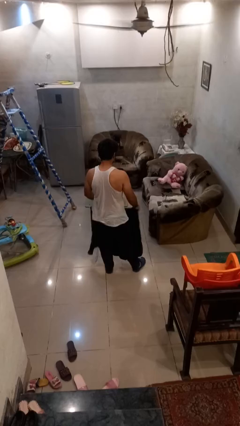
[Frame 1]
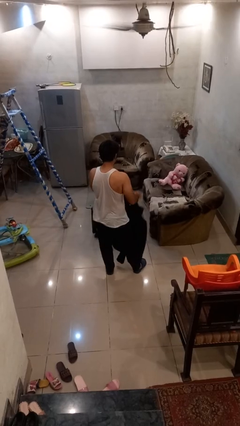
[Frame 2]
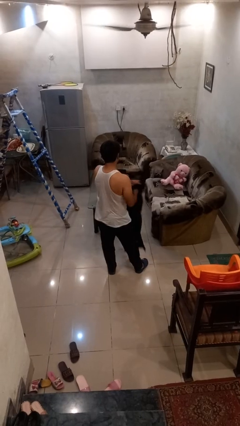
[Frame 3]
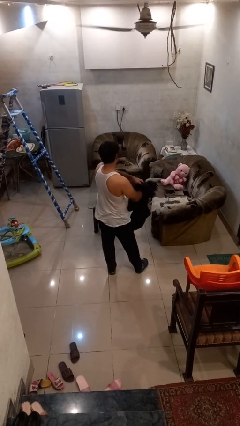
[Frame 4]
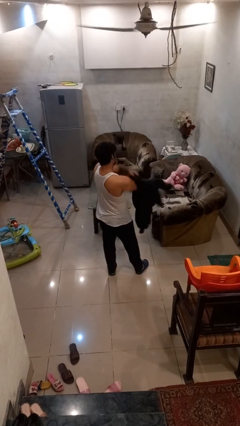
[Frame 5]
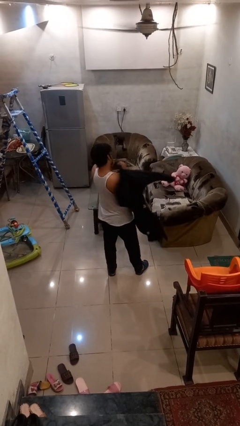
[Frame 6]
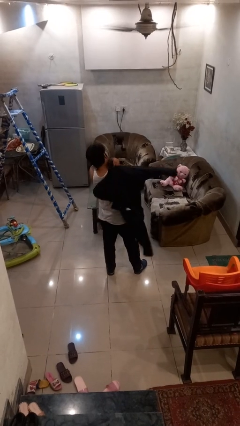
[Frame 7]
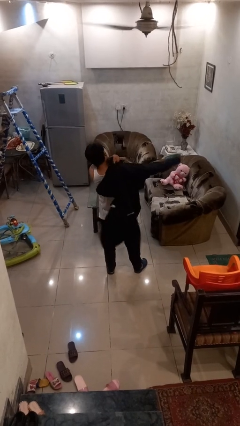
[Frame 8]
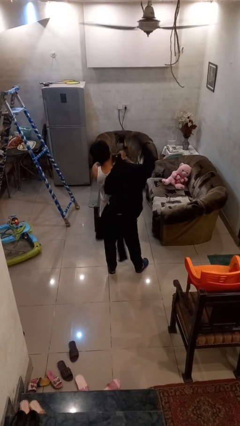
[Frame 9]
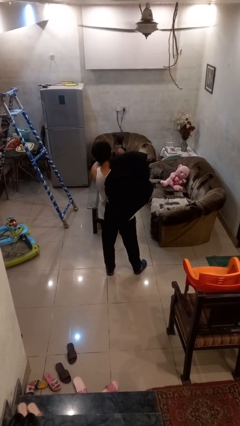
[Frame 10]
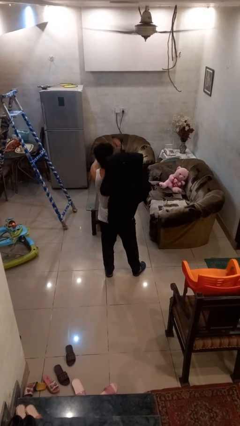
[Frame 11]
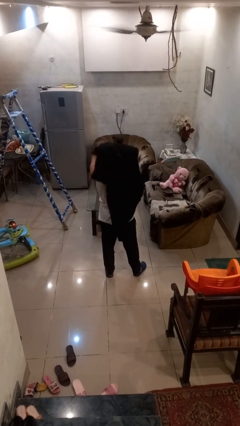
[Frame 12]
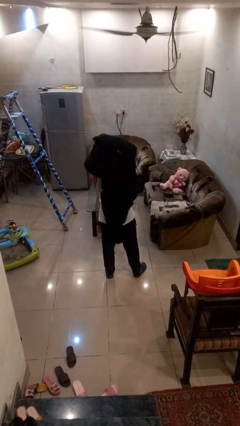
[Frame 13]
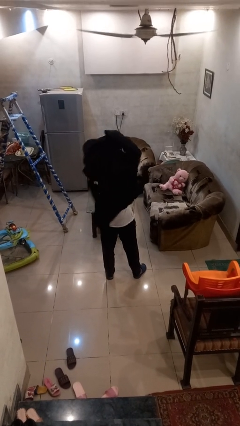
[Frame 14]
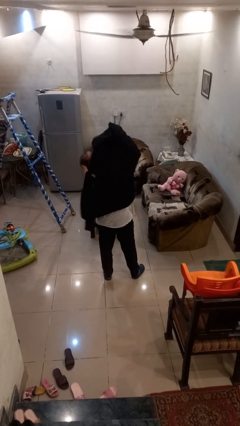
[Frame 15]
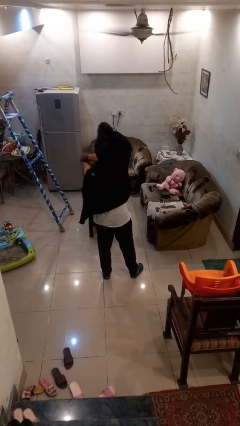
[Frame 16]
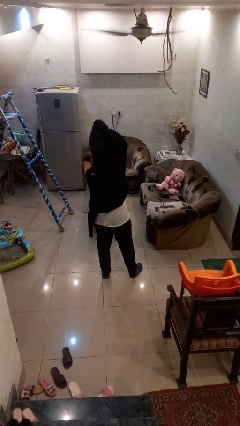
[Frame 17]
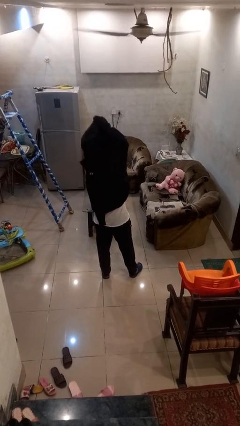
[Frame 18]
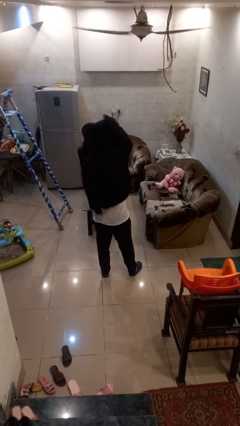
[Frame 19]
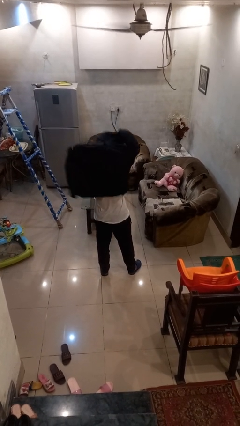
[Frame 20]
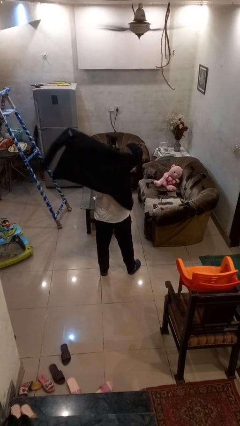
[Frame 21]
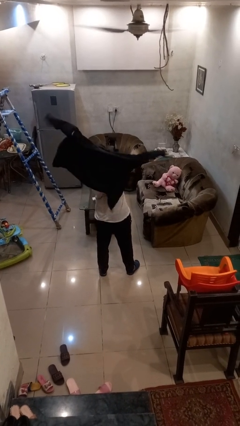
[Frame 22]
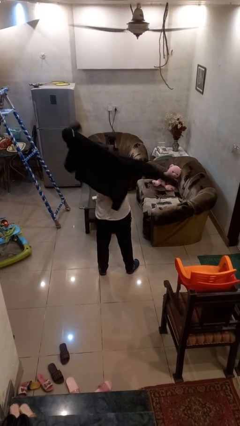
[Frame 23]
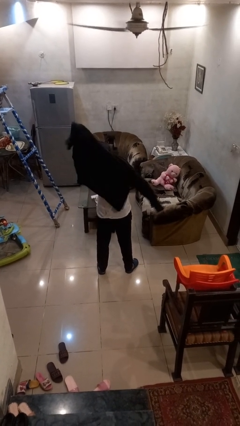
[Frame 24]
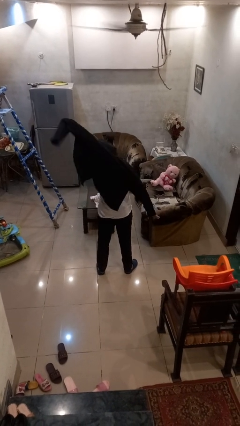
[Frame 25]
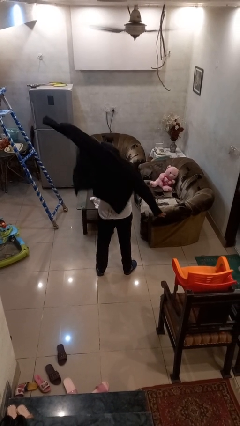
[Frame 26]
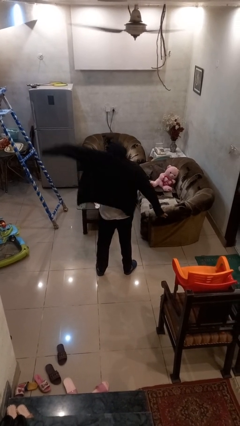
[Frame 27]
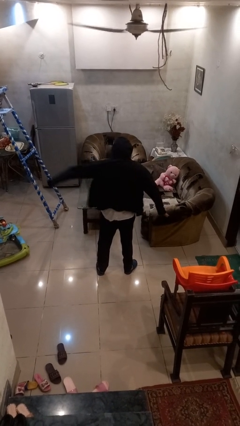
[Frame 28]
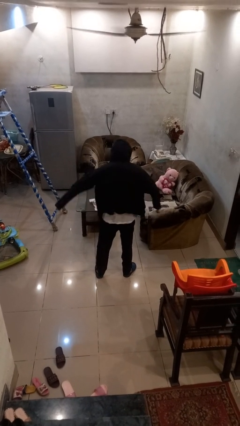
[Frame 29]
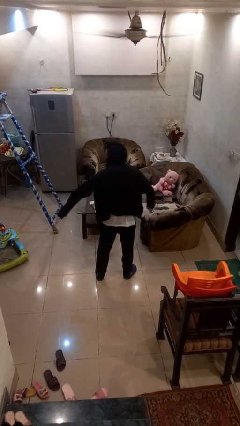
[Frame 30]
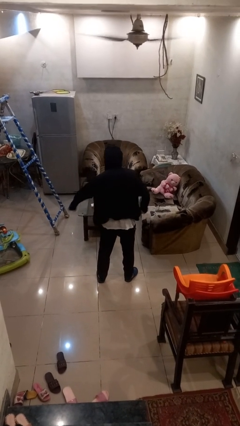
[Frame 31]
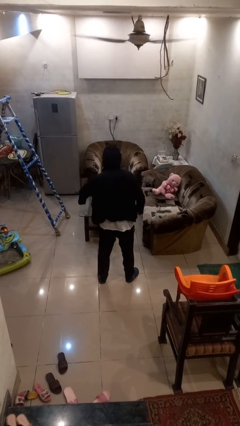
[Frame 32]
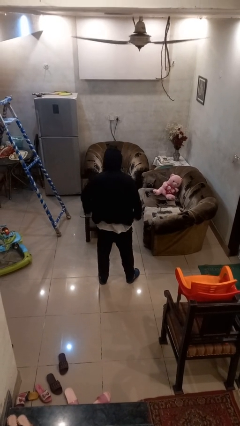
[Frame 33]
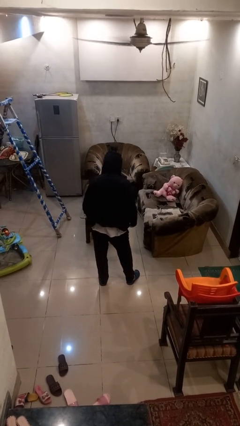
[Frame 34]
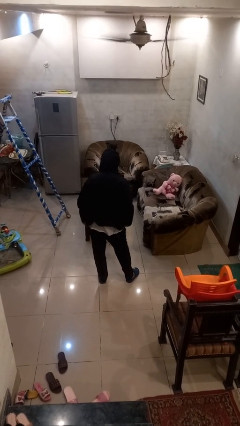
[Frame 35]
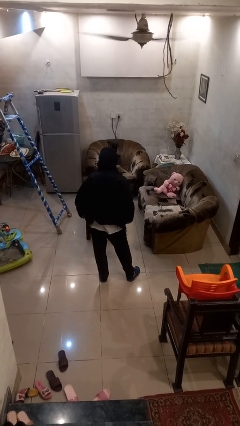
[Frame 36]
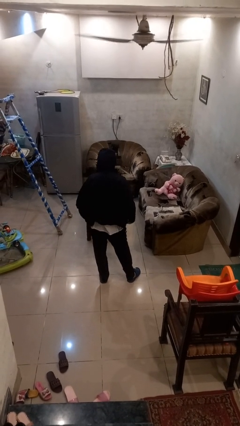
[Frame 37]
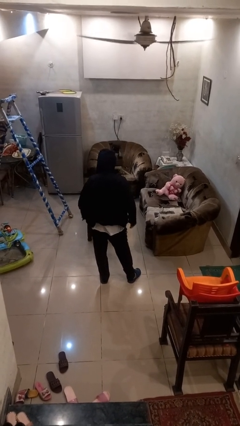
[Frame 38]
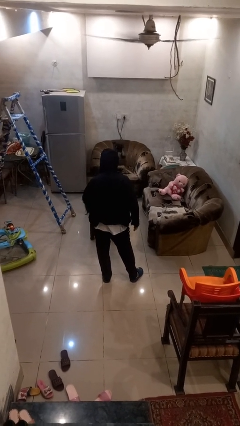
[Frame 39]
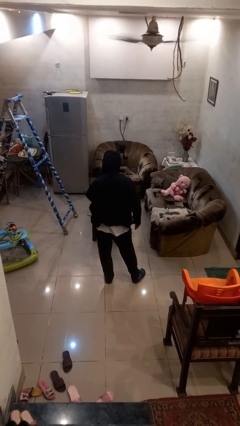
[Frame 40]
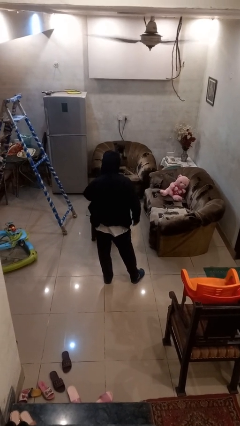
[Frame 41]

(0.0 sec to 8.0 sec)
person puts on hoodie

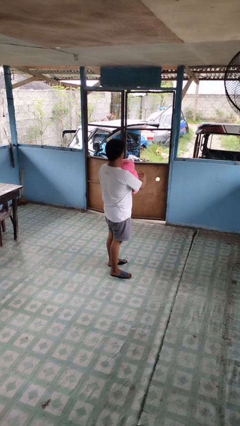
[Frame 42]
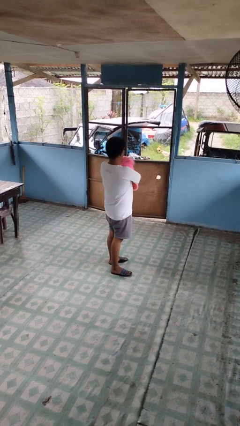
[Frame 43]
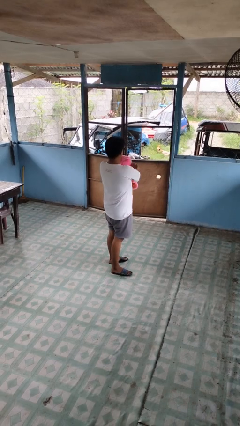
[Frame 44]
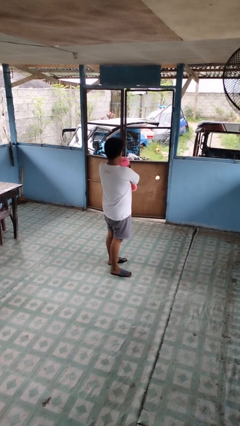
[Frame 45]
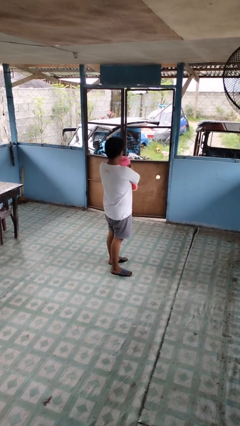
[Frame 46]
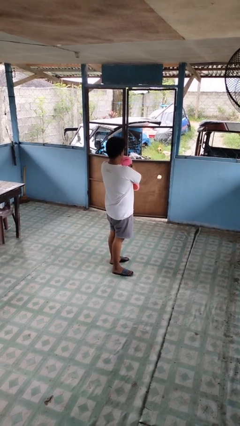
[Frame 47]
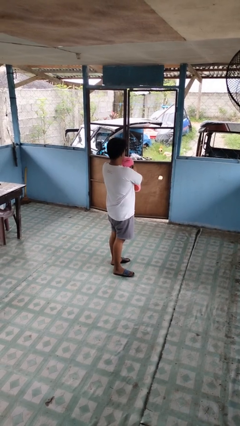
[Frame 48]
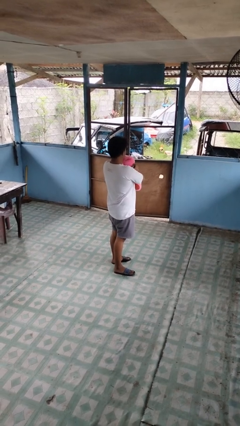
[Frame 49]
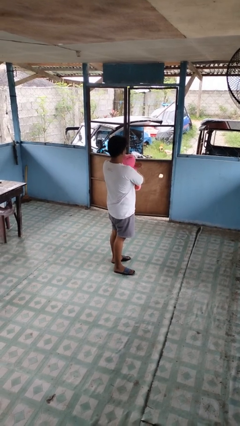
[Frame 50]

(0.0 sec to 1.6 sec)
person hugs stuffed animal

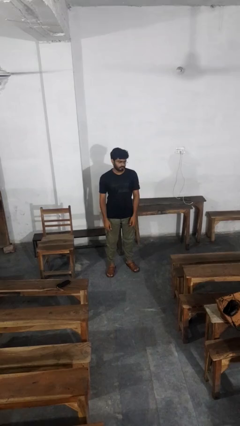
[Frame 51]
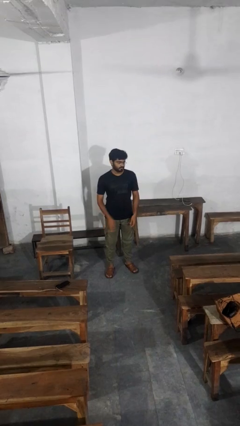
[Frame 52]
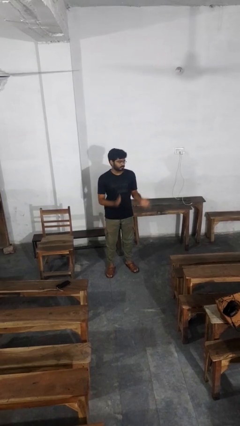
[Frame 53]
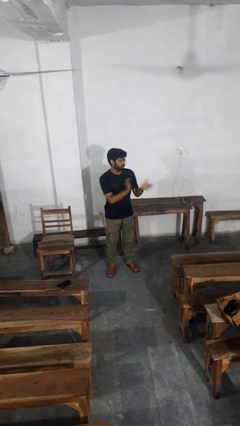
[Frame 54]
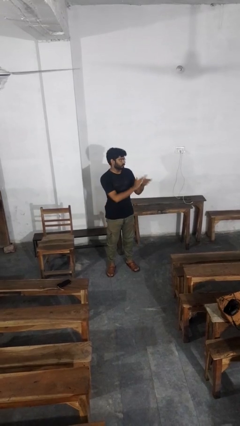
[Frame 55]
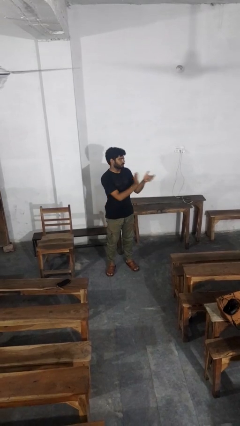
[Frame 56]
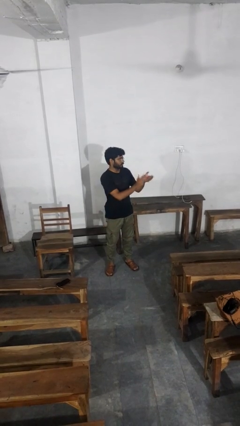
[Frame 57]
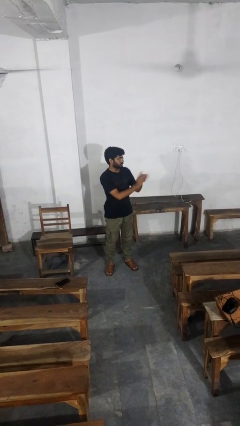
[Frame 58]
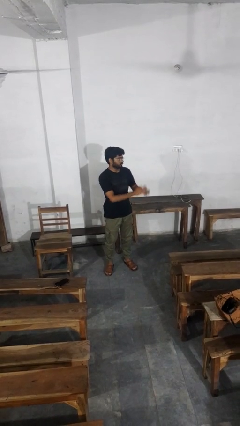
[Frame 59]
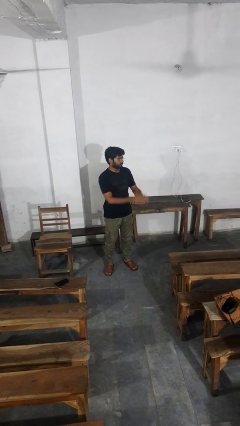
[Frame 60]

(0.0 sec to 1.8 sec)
person claps hands

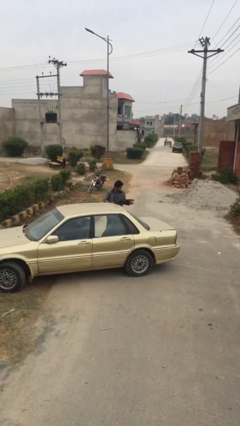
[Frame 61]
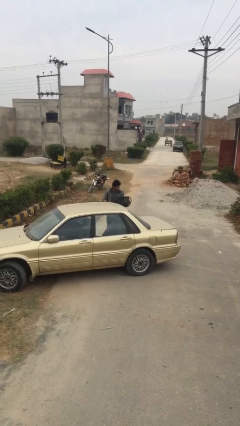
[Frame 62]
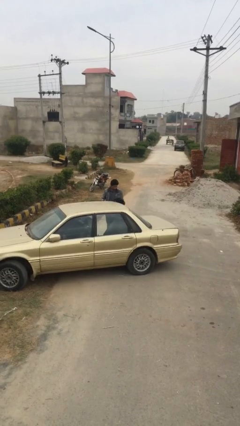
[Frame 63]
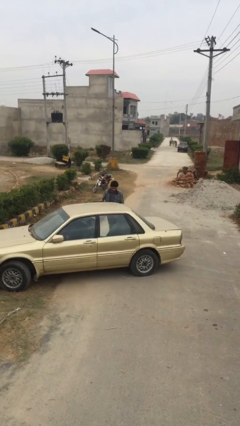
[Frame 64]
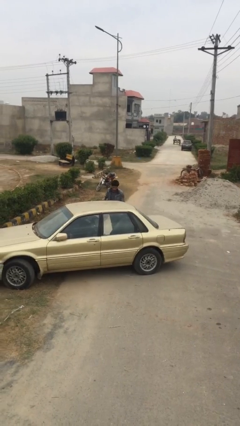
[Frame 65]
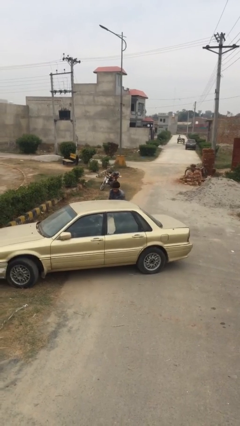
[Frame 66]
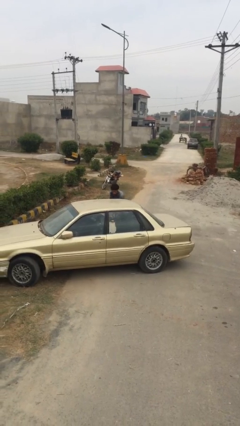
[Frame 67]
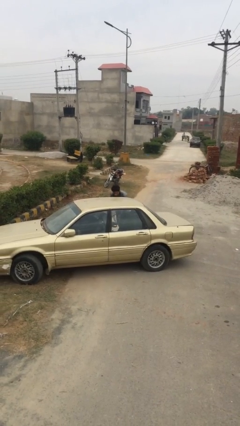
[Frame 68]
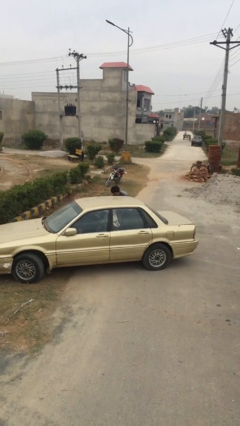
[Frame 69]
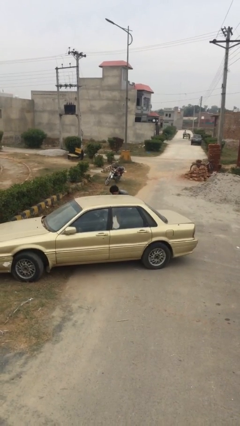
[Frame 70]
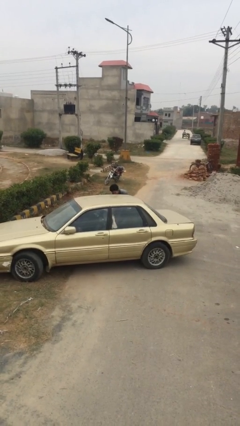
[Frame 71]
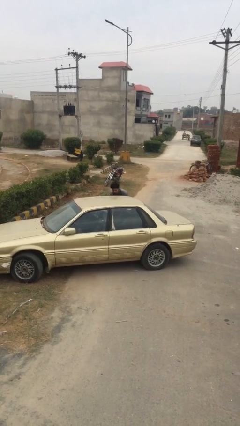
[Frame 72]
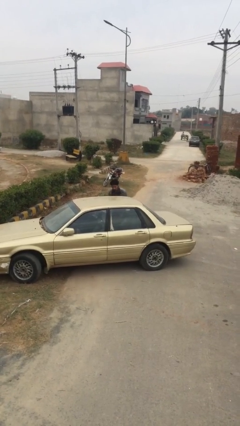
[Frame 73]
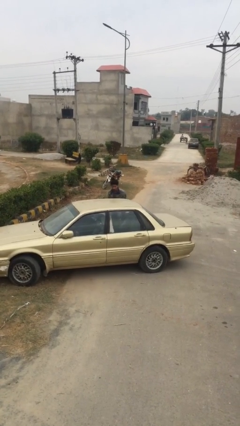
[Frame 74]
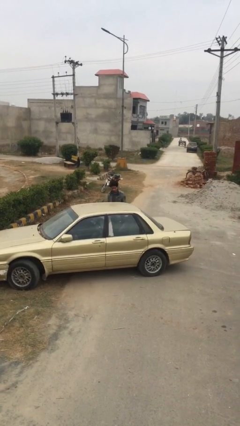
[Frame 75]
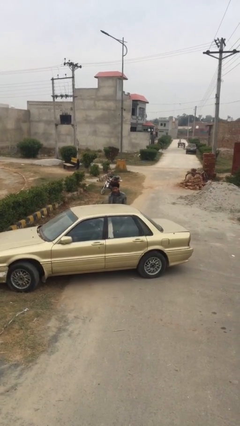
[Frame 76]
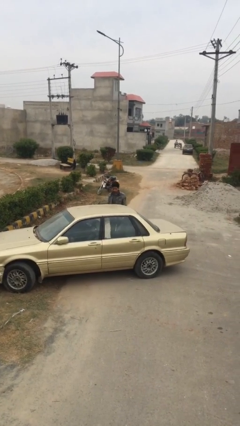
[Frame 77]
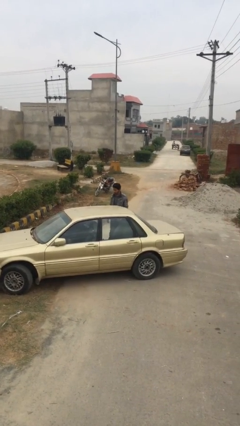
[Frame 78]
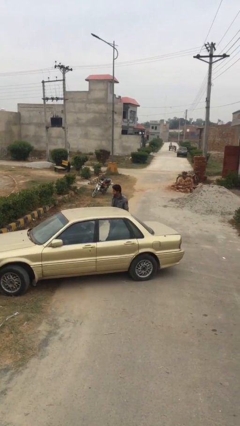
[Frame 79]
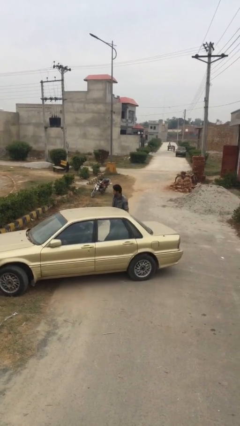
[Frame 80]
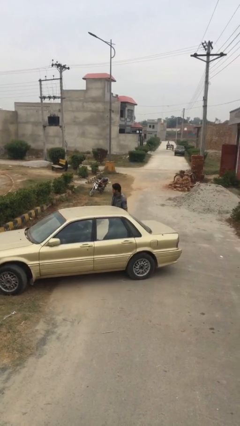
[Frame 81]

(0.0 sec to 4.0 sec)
person loads car

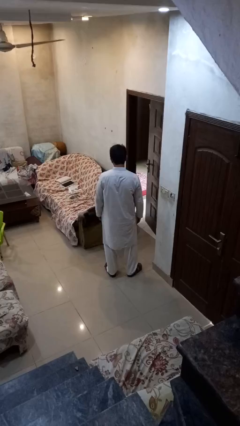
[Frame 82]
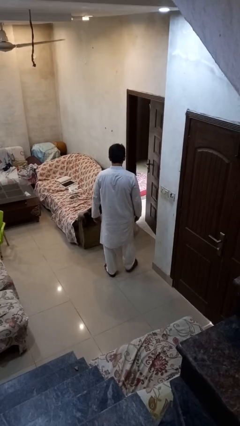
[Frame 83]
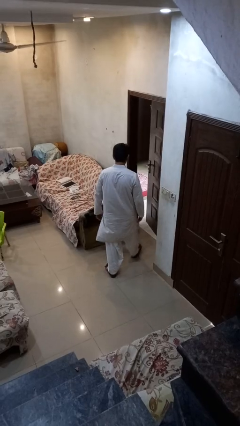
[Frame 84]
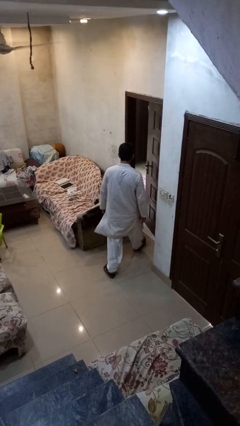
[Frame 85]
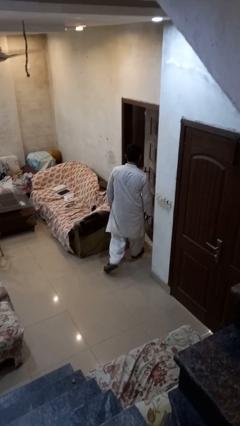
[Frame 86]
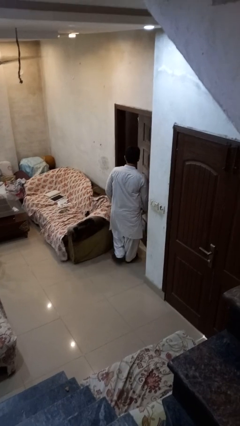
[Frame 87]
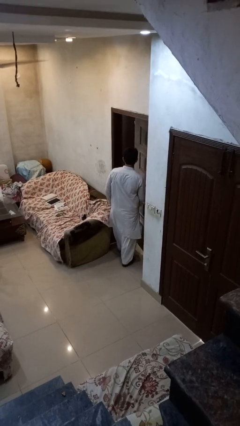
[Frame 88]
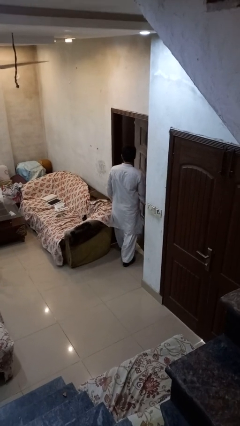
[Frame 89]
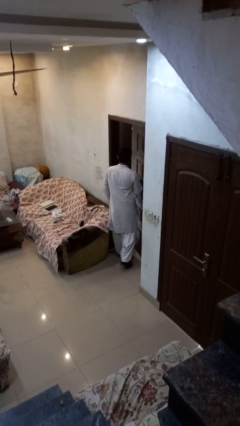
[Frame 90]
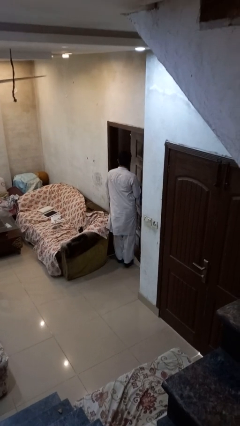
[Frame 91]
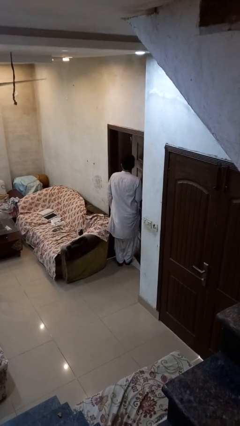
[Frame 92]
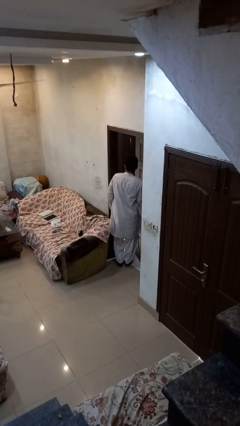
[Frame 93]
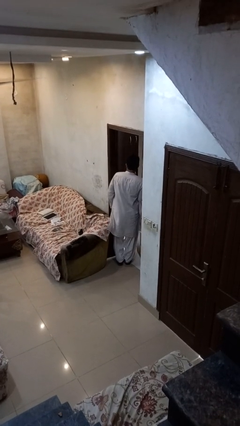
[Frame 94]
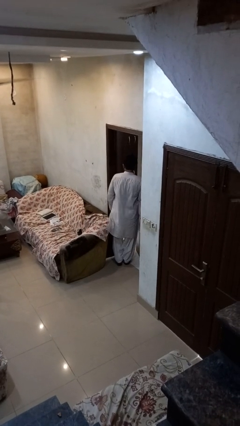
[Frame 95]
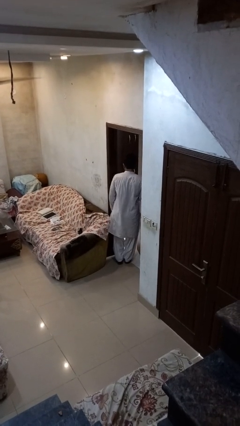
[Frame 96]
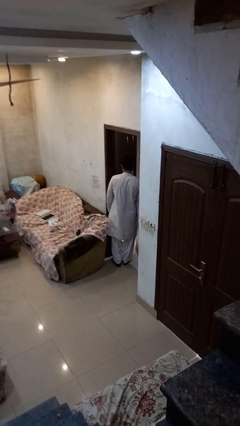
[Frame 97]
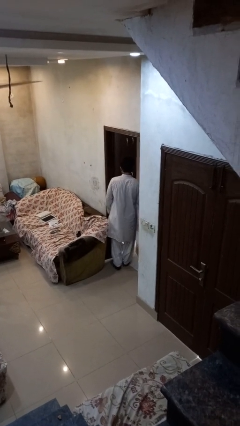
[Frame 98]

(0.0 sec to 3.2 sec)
person bumps into wall
